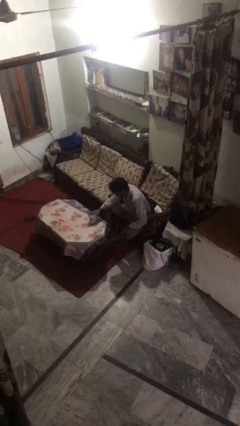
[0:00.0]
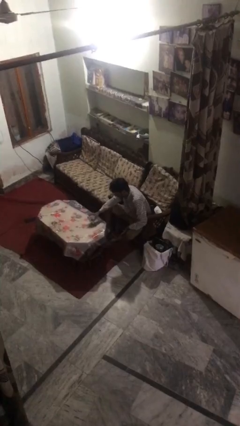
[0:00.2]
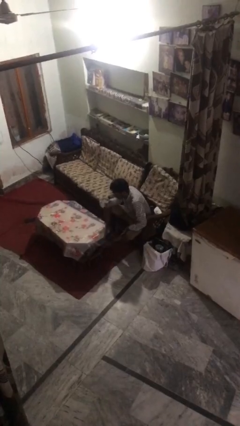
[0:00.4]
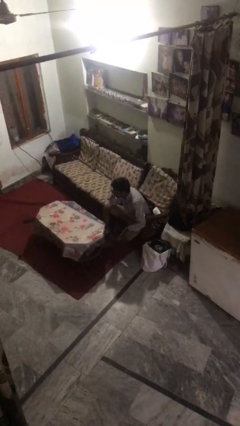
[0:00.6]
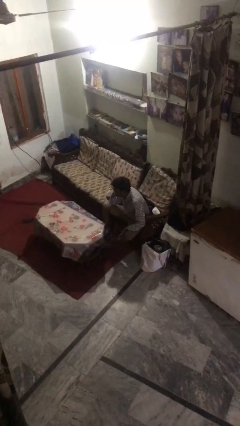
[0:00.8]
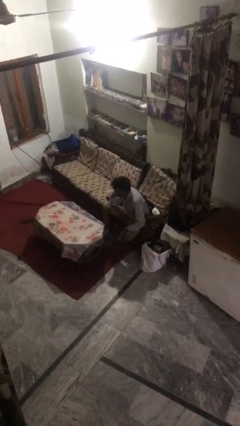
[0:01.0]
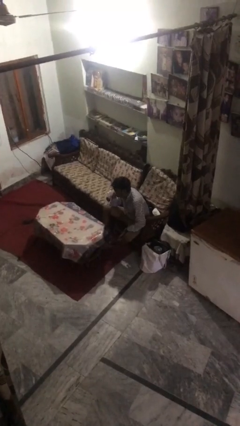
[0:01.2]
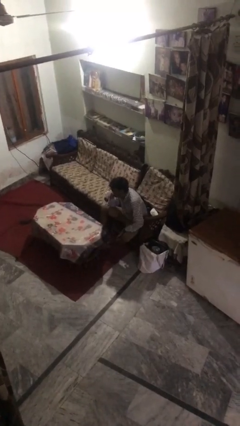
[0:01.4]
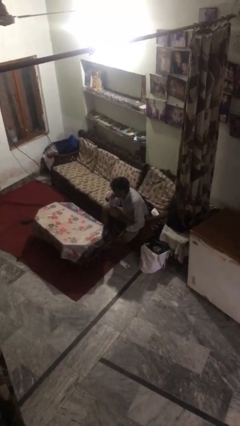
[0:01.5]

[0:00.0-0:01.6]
person drinks from mug

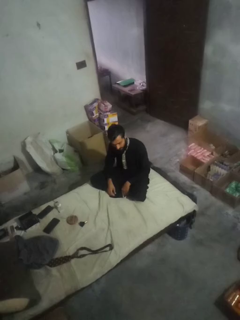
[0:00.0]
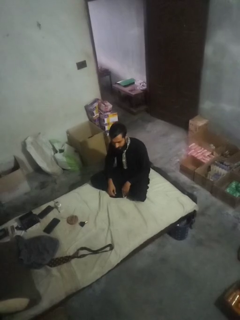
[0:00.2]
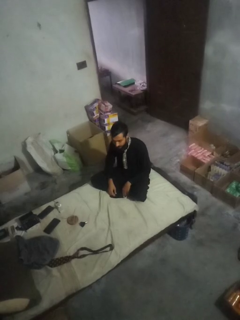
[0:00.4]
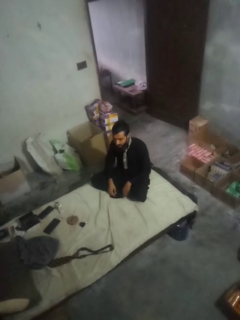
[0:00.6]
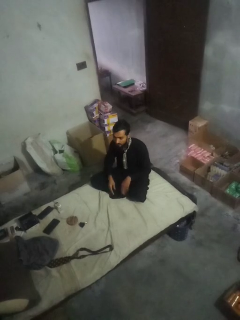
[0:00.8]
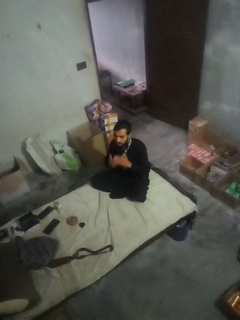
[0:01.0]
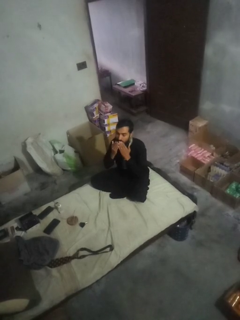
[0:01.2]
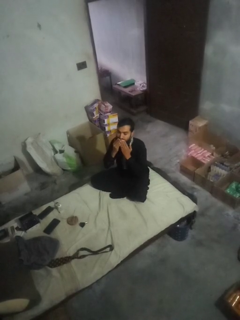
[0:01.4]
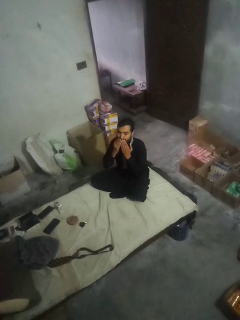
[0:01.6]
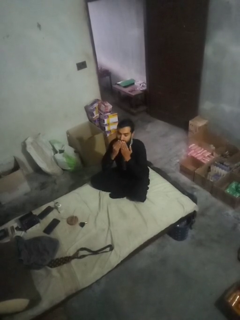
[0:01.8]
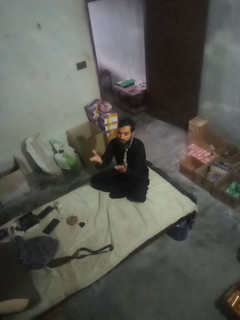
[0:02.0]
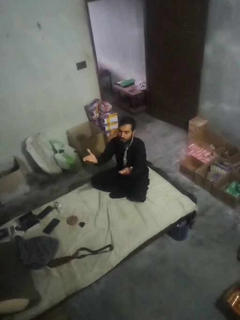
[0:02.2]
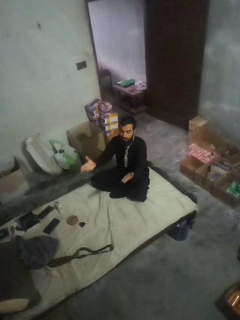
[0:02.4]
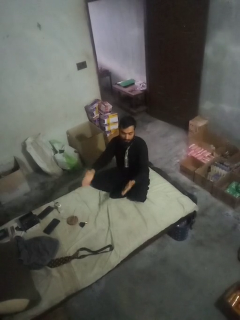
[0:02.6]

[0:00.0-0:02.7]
person gestures blow kiss

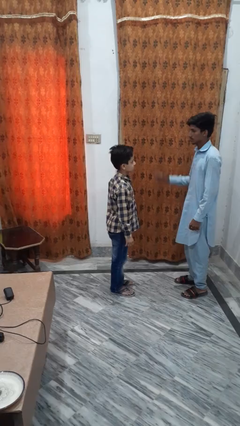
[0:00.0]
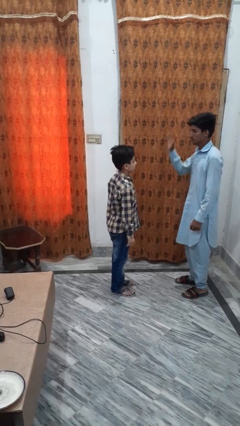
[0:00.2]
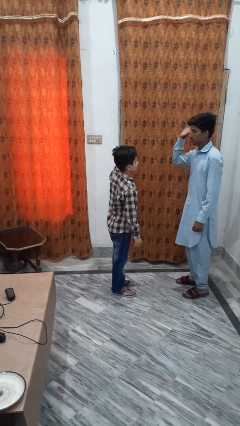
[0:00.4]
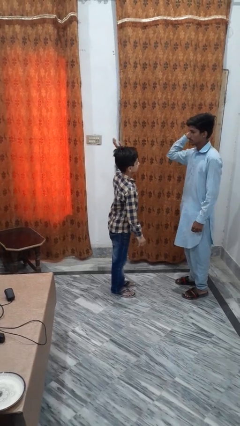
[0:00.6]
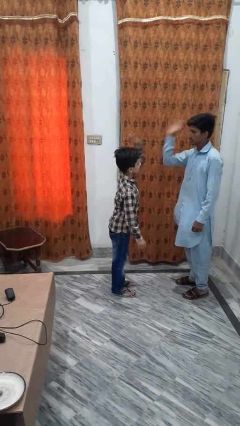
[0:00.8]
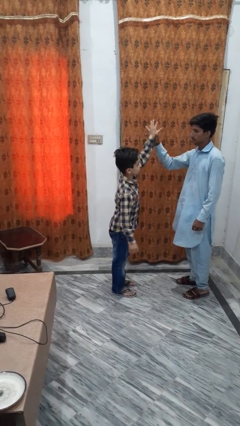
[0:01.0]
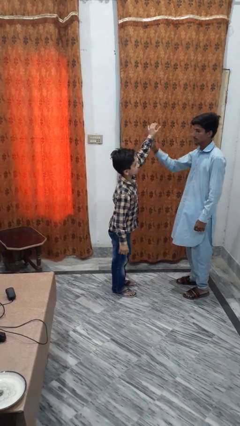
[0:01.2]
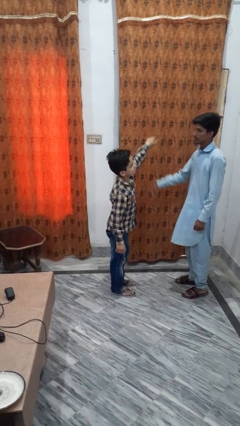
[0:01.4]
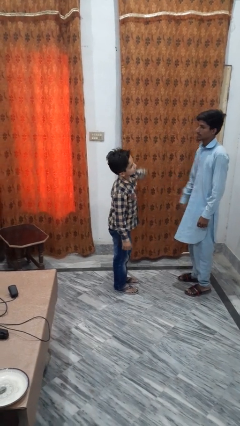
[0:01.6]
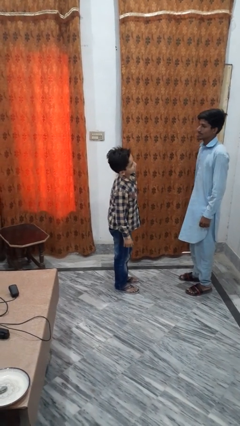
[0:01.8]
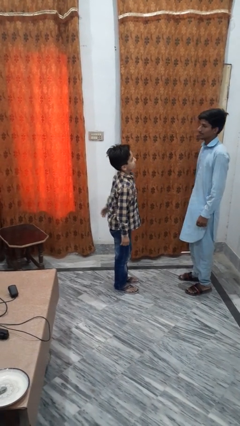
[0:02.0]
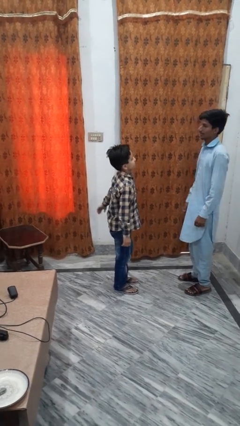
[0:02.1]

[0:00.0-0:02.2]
person highfives hand

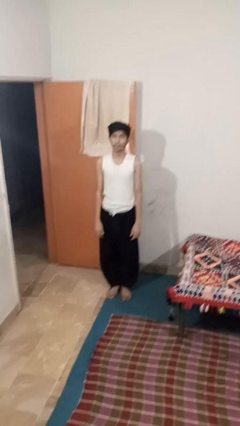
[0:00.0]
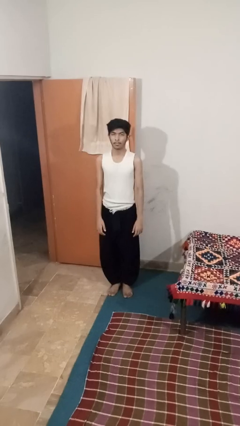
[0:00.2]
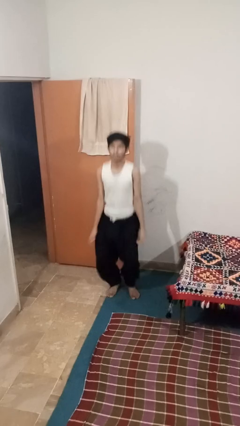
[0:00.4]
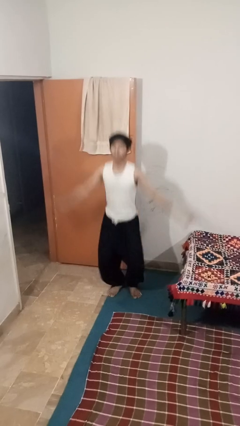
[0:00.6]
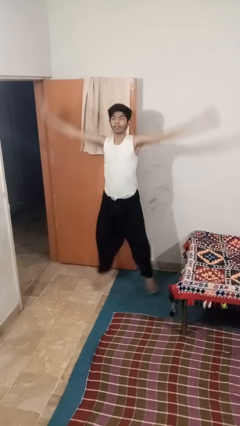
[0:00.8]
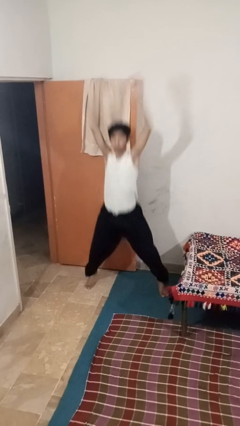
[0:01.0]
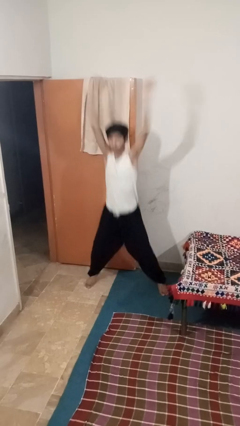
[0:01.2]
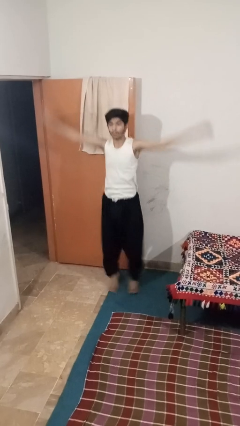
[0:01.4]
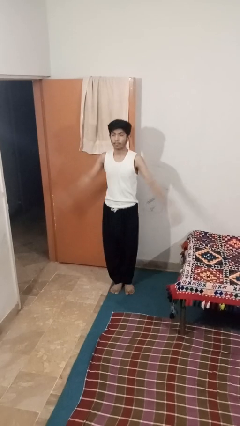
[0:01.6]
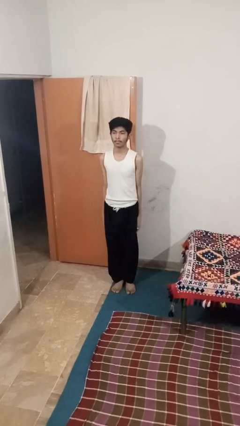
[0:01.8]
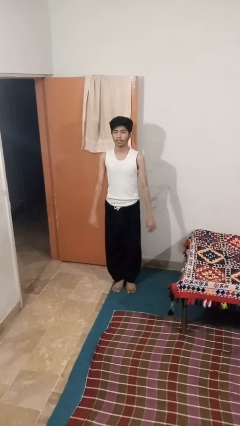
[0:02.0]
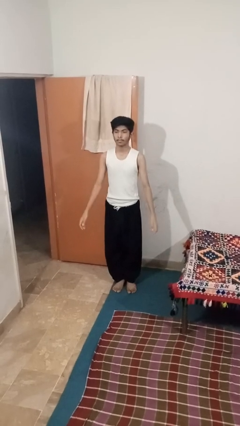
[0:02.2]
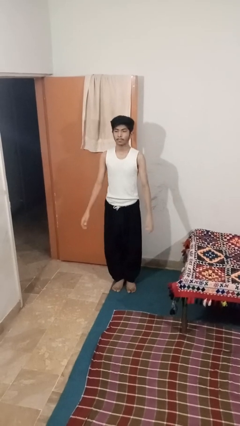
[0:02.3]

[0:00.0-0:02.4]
person exercises with jumping jacks

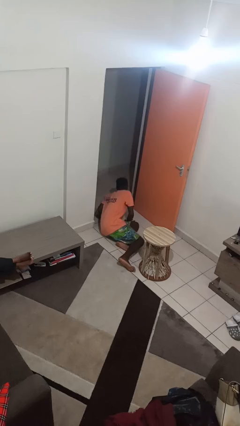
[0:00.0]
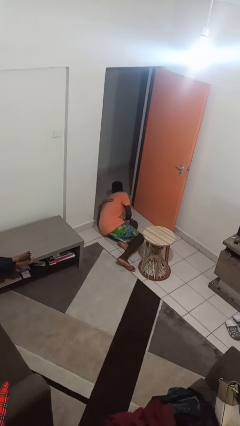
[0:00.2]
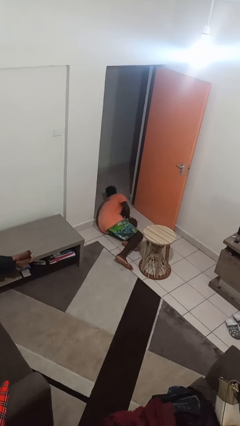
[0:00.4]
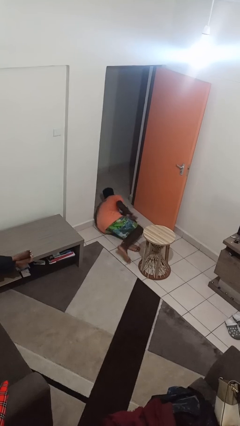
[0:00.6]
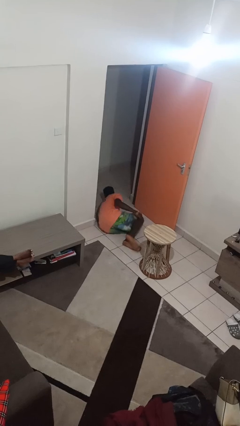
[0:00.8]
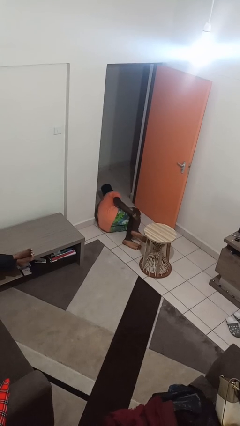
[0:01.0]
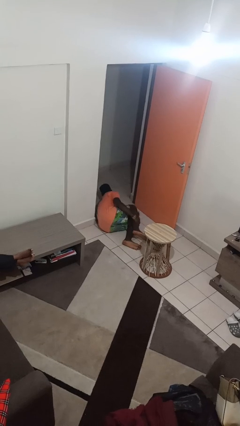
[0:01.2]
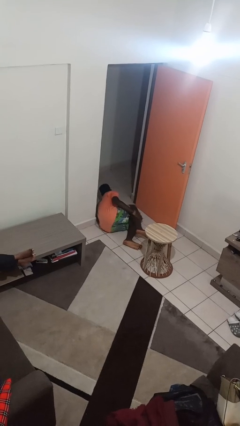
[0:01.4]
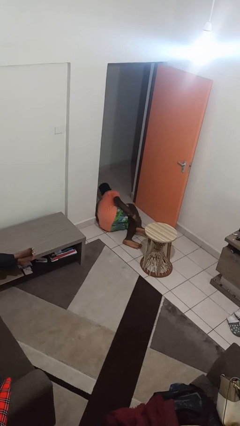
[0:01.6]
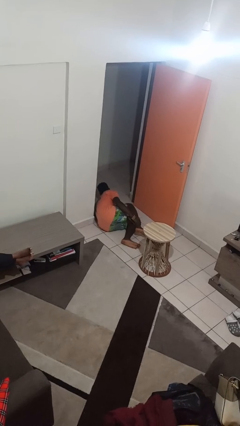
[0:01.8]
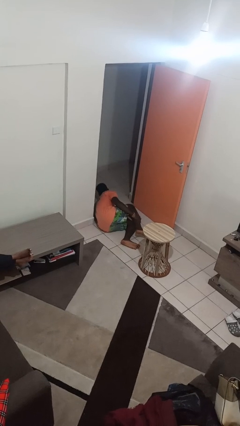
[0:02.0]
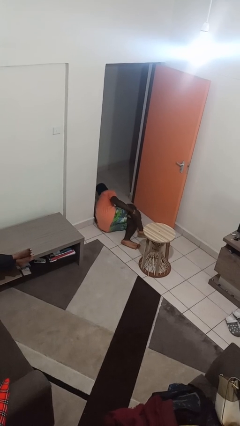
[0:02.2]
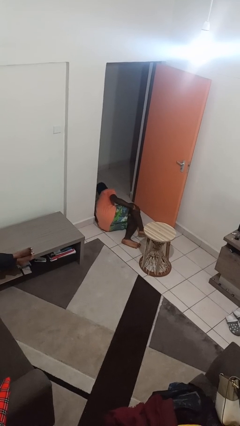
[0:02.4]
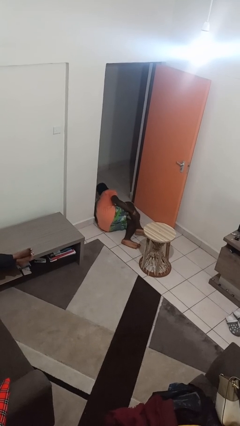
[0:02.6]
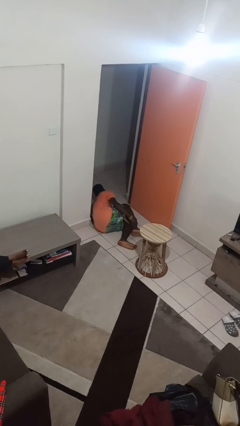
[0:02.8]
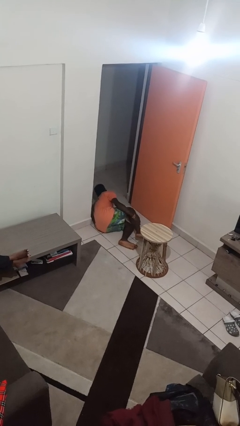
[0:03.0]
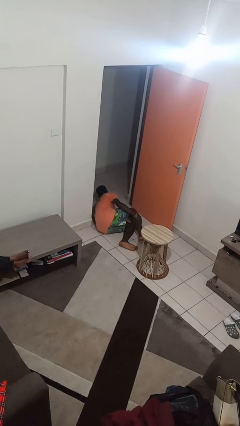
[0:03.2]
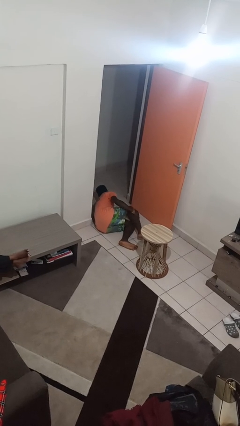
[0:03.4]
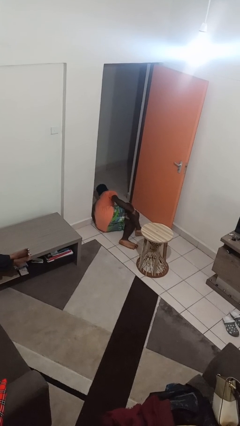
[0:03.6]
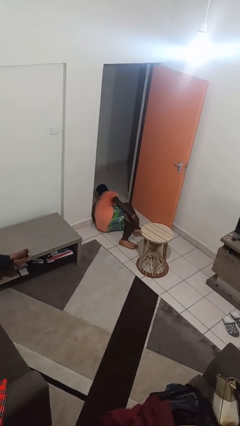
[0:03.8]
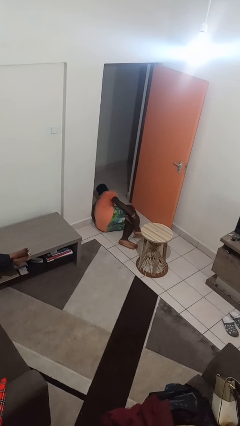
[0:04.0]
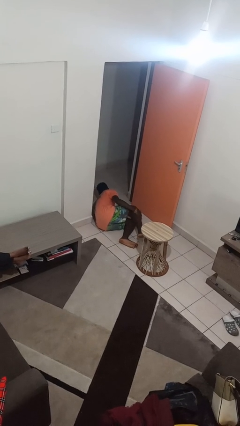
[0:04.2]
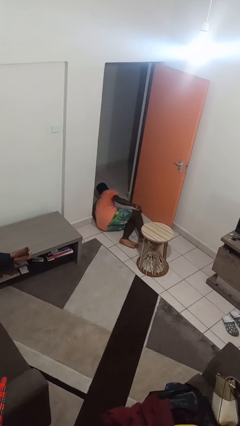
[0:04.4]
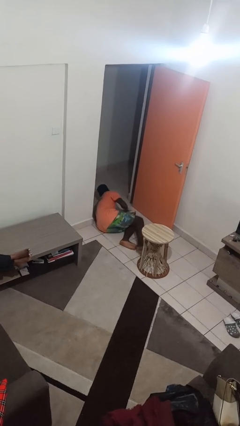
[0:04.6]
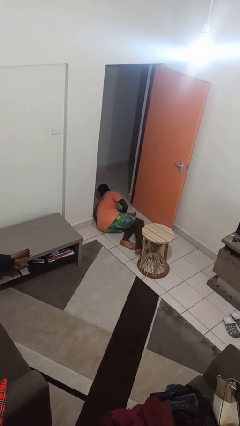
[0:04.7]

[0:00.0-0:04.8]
person lies down on floor

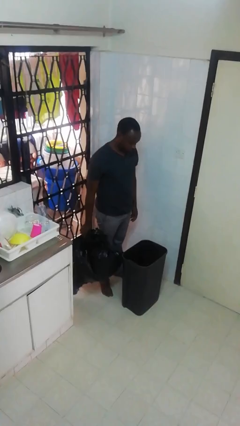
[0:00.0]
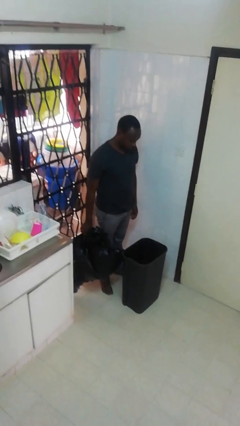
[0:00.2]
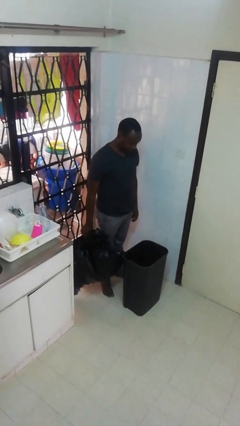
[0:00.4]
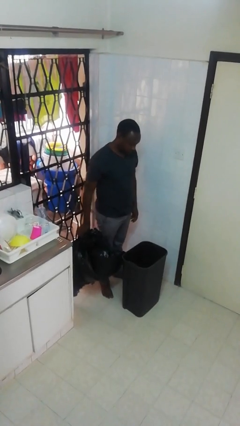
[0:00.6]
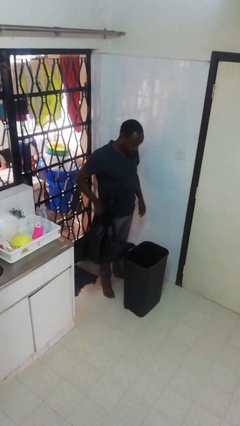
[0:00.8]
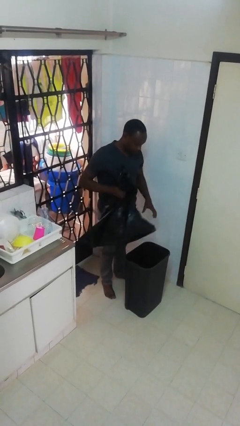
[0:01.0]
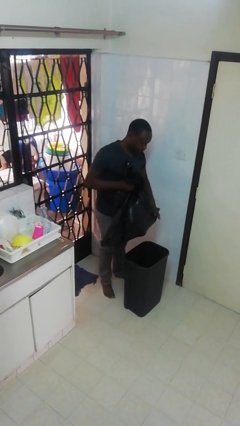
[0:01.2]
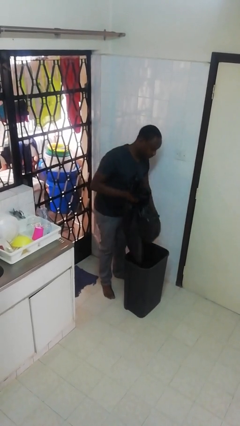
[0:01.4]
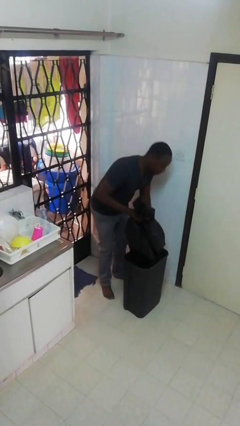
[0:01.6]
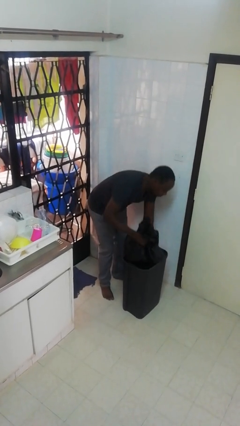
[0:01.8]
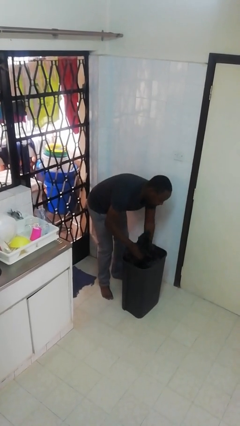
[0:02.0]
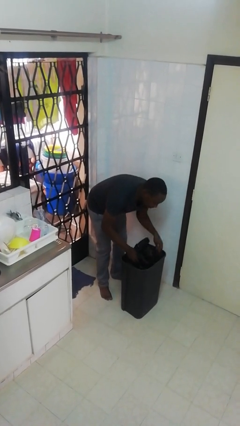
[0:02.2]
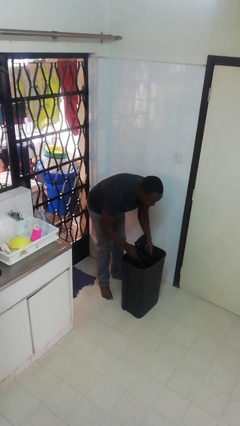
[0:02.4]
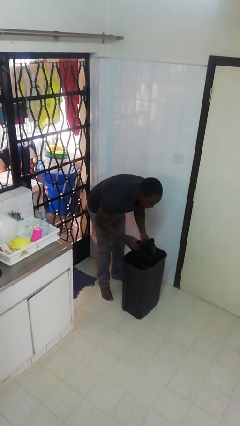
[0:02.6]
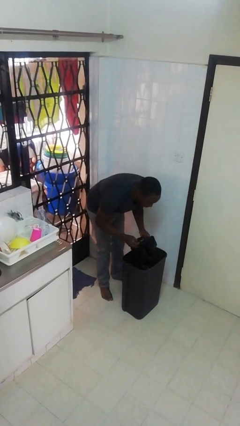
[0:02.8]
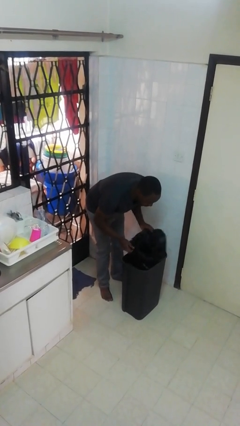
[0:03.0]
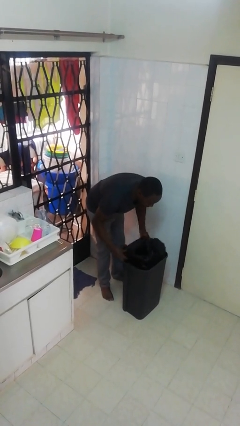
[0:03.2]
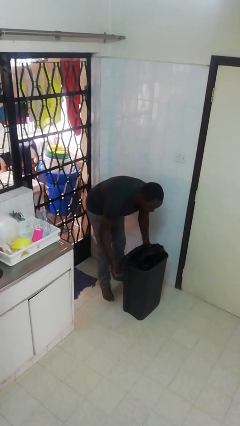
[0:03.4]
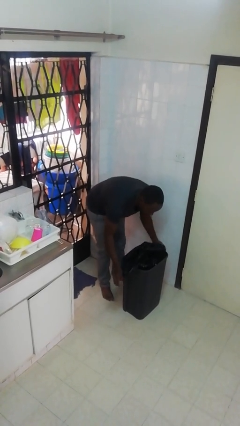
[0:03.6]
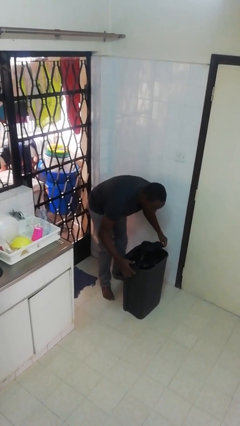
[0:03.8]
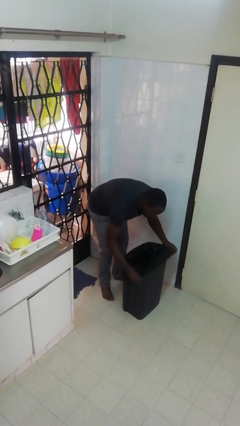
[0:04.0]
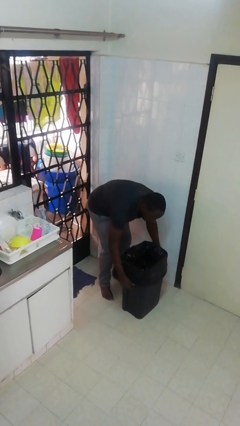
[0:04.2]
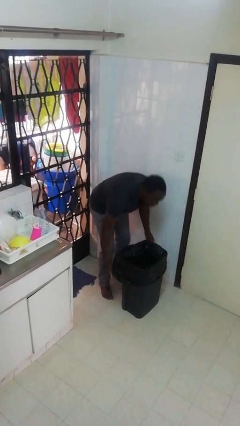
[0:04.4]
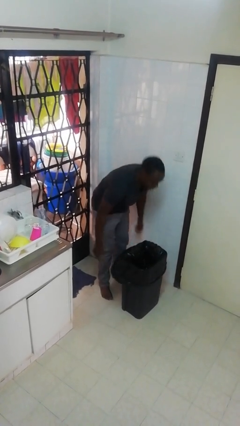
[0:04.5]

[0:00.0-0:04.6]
person inserts trashbag into trashcan

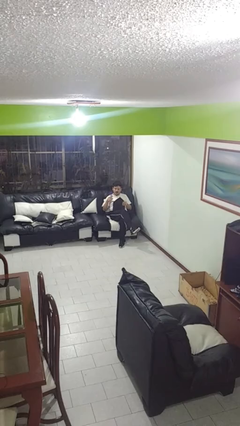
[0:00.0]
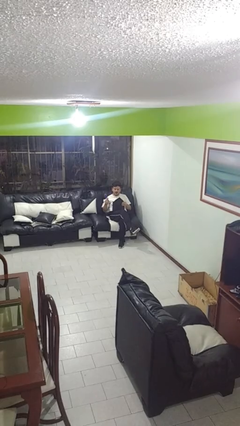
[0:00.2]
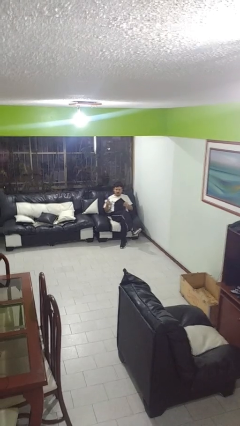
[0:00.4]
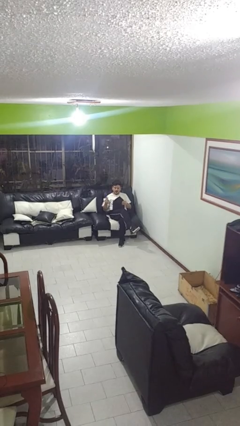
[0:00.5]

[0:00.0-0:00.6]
person takes object from purse
